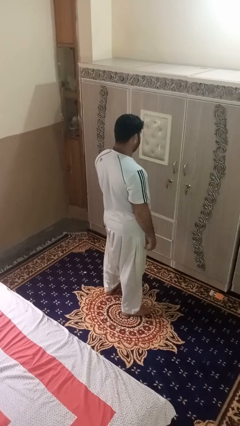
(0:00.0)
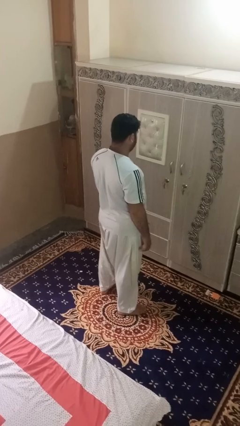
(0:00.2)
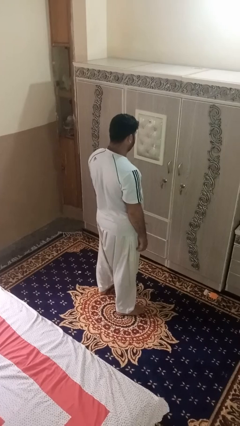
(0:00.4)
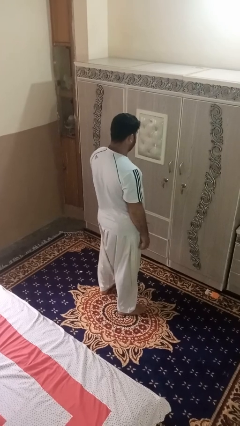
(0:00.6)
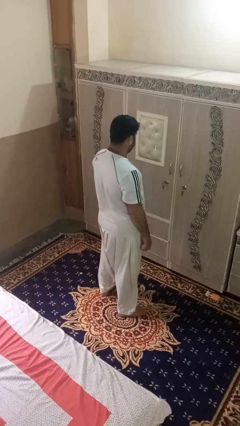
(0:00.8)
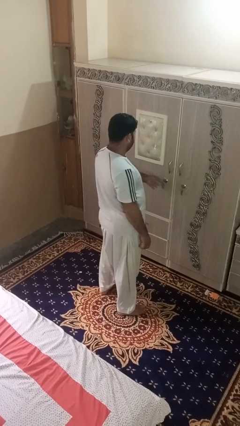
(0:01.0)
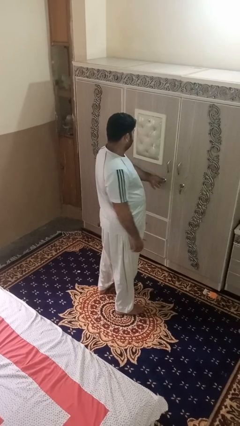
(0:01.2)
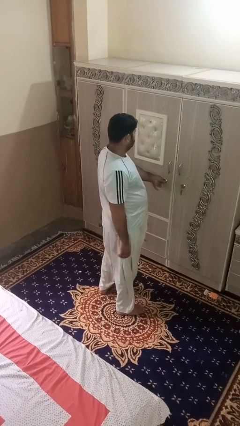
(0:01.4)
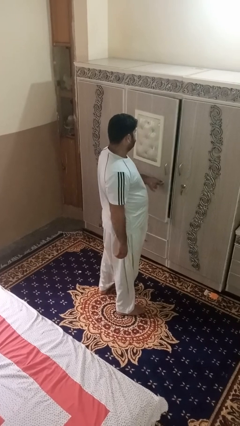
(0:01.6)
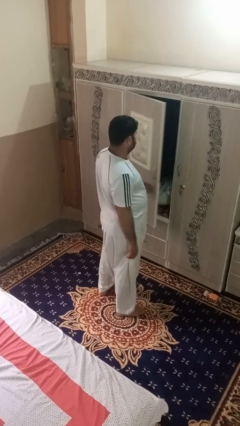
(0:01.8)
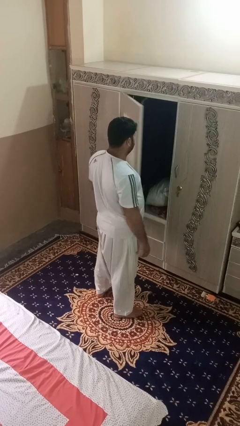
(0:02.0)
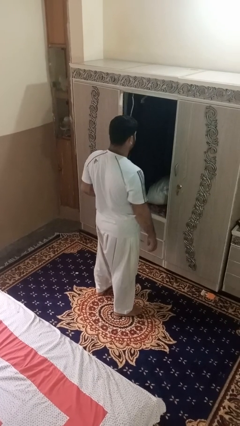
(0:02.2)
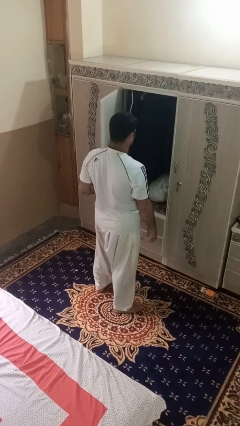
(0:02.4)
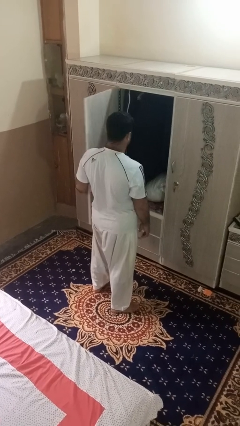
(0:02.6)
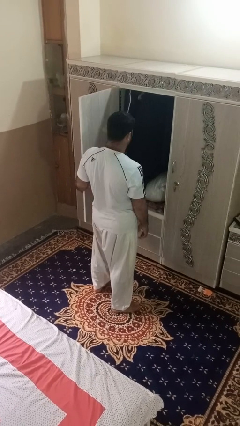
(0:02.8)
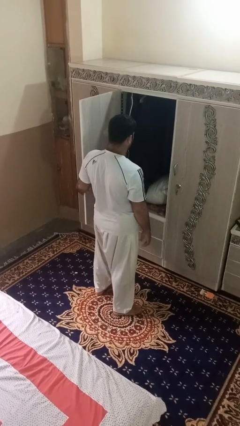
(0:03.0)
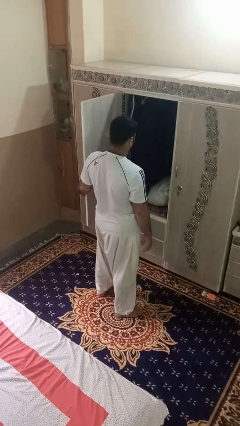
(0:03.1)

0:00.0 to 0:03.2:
person opens dresser drawer

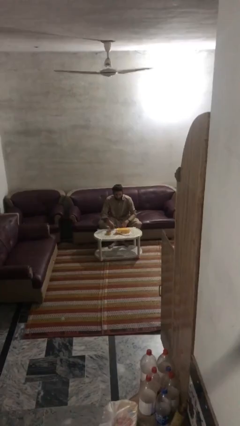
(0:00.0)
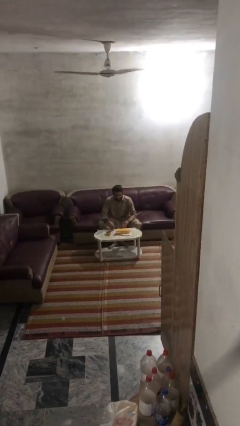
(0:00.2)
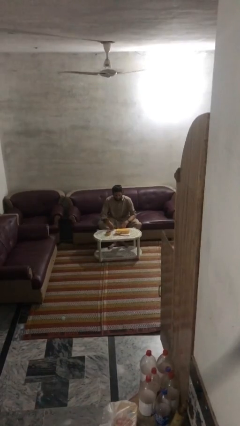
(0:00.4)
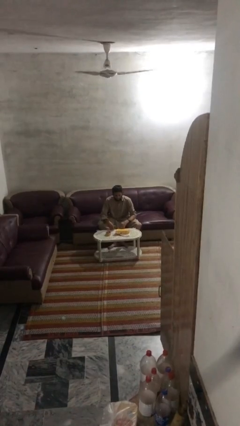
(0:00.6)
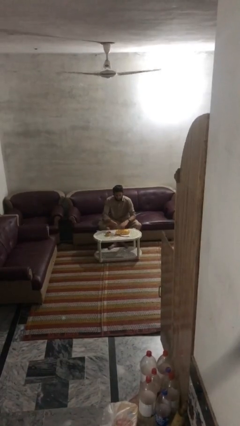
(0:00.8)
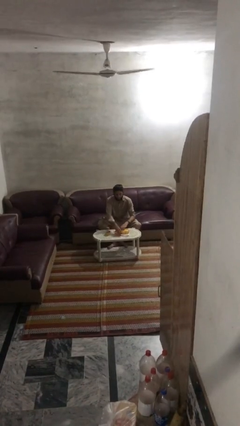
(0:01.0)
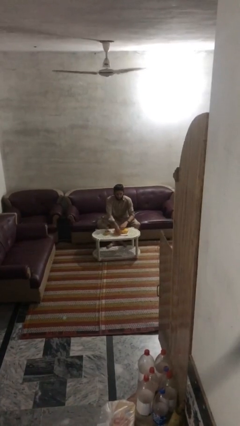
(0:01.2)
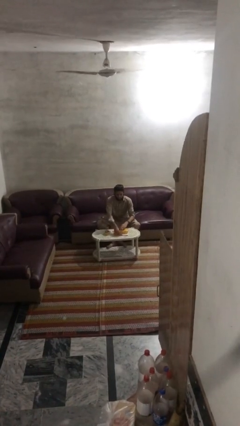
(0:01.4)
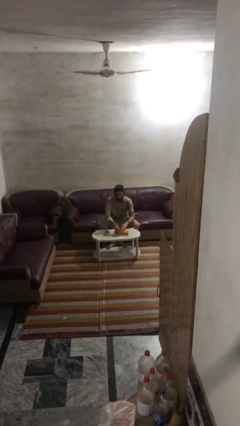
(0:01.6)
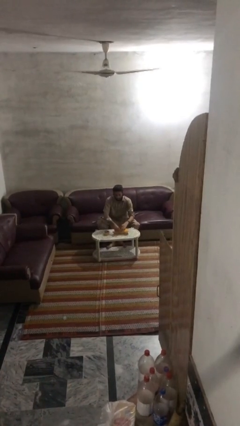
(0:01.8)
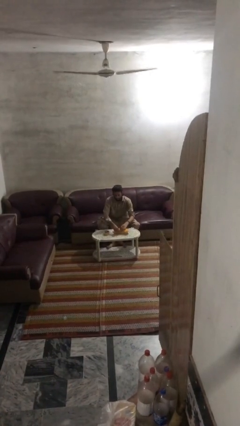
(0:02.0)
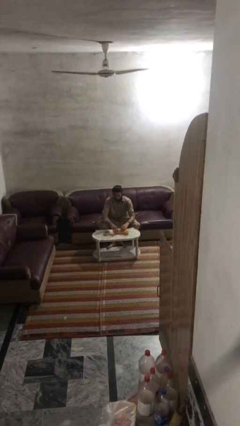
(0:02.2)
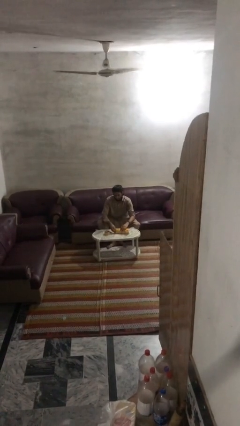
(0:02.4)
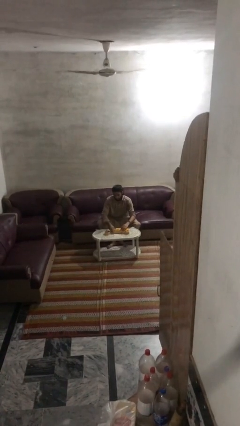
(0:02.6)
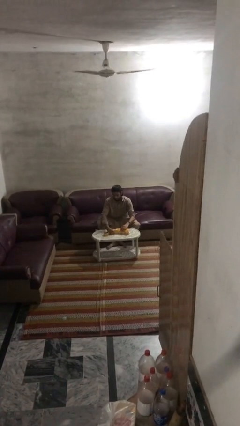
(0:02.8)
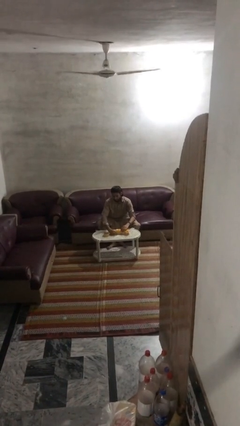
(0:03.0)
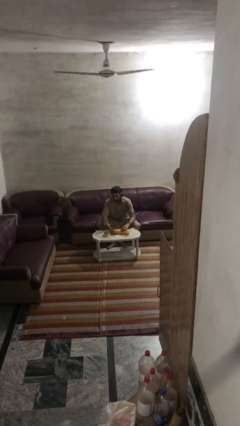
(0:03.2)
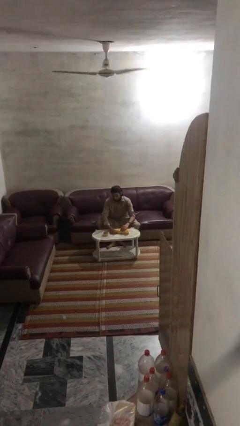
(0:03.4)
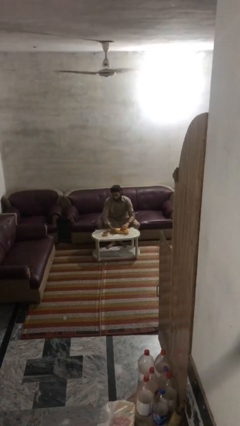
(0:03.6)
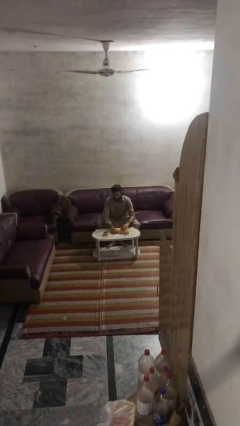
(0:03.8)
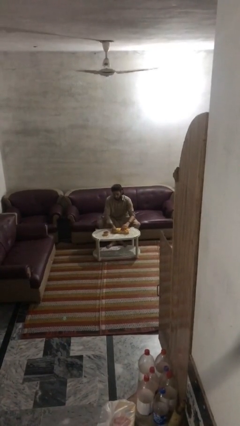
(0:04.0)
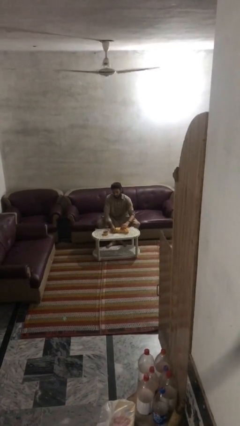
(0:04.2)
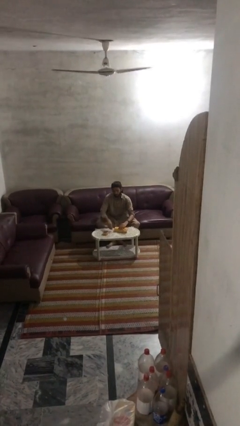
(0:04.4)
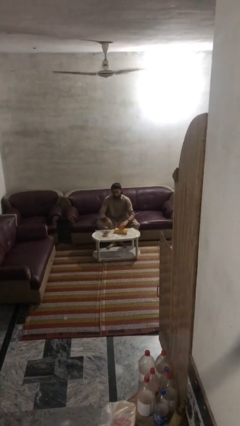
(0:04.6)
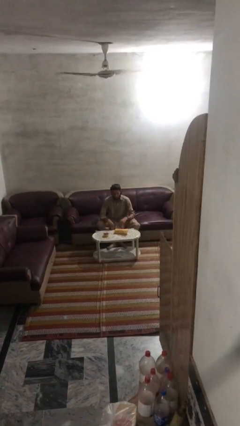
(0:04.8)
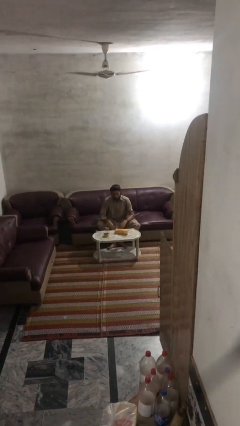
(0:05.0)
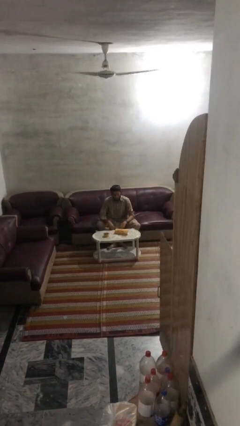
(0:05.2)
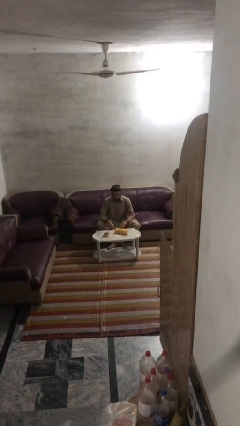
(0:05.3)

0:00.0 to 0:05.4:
person wraps box

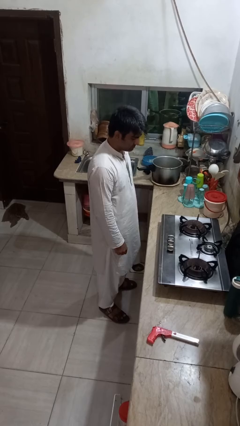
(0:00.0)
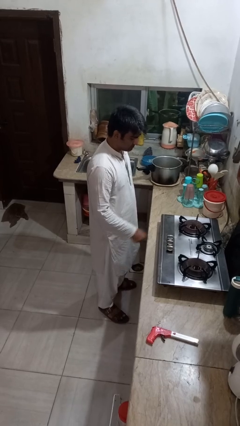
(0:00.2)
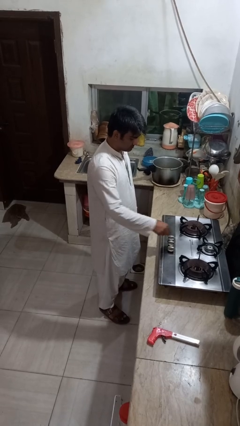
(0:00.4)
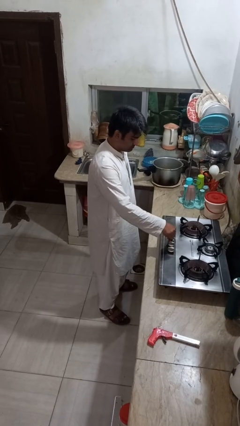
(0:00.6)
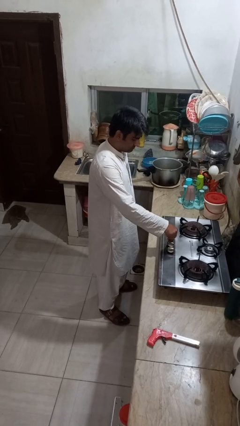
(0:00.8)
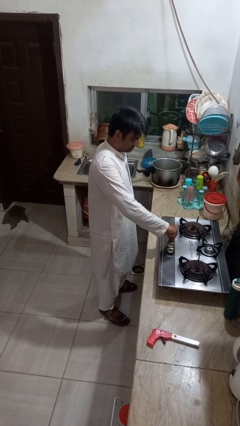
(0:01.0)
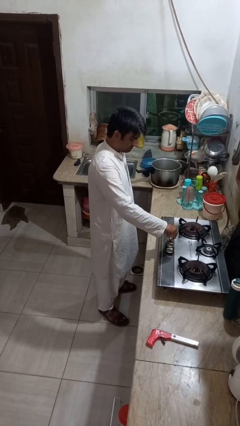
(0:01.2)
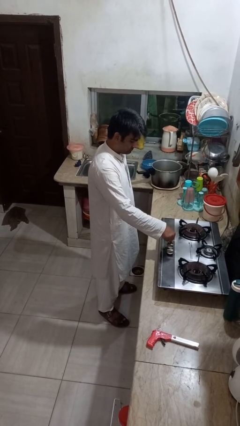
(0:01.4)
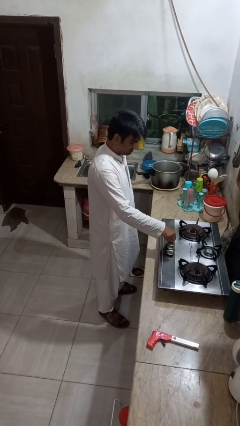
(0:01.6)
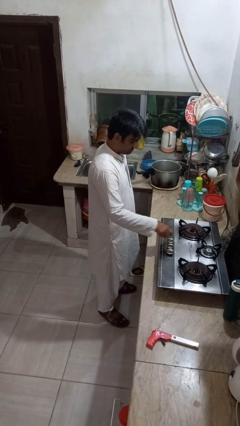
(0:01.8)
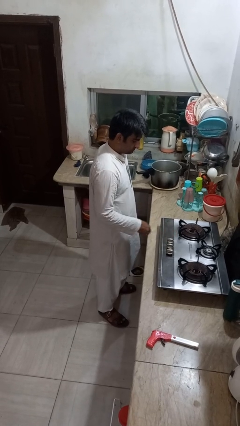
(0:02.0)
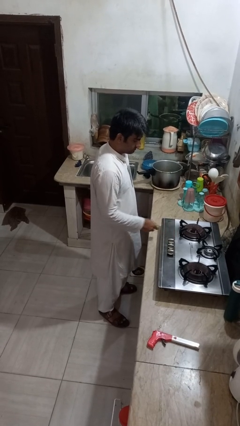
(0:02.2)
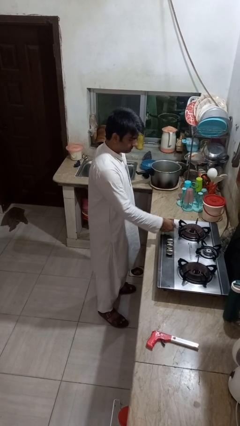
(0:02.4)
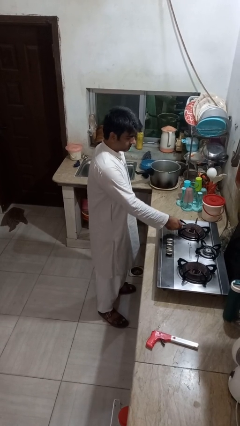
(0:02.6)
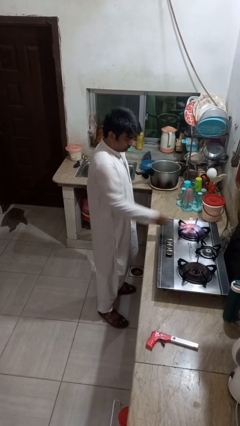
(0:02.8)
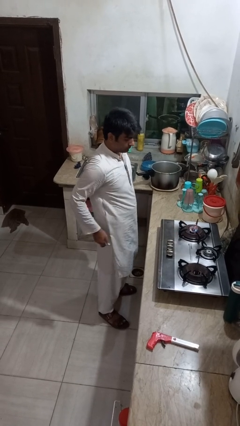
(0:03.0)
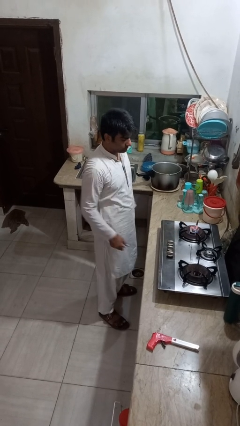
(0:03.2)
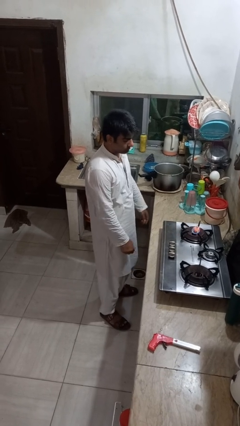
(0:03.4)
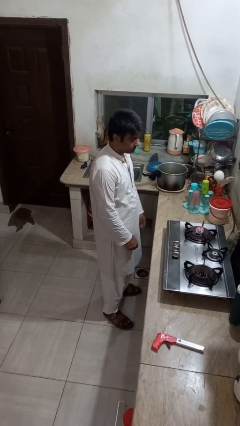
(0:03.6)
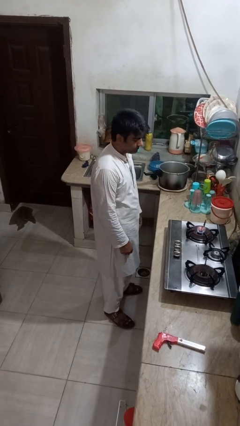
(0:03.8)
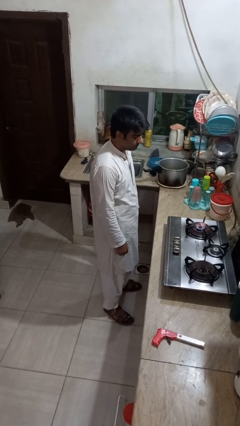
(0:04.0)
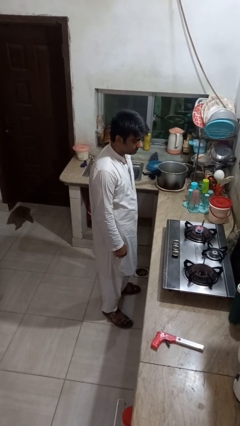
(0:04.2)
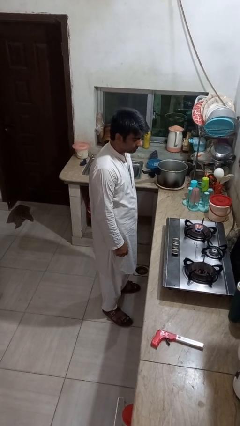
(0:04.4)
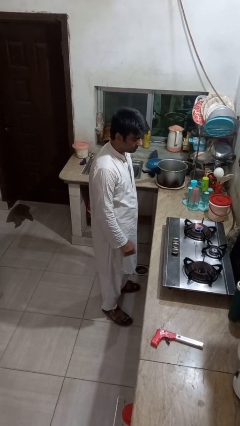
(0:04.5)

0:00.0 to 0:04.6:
person turns on stovetop

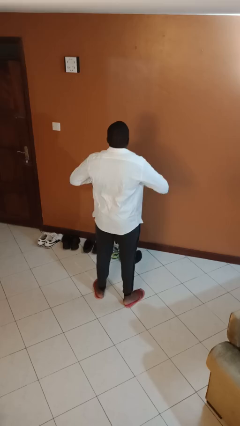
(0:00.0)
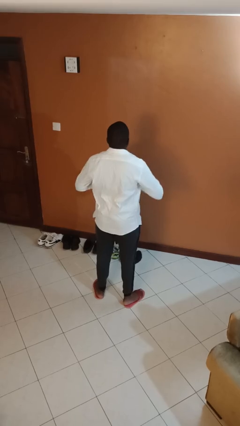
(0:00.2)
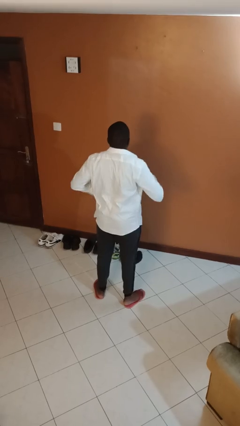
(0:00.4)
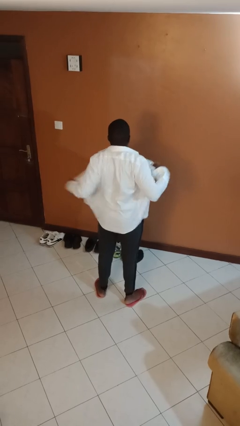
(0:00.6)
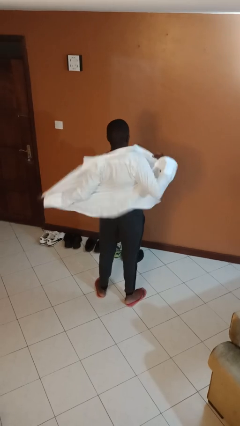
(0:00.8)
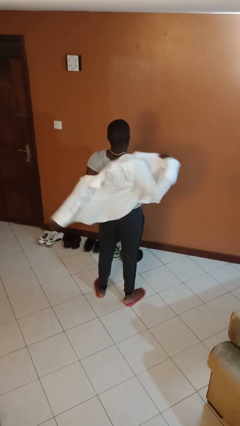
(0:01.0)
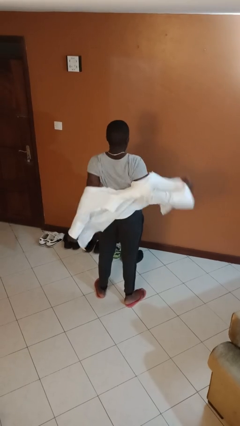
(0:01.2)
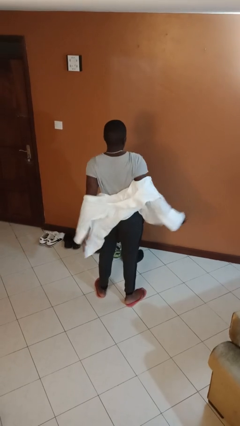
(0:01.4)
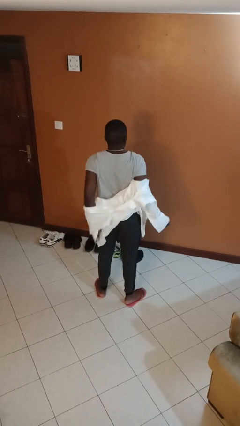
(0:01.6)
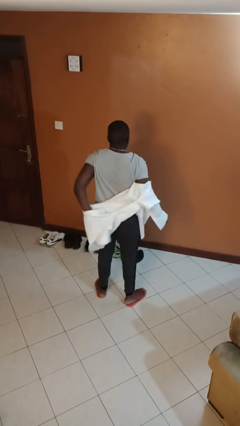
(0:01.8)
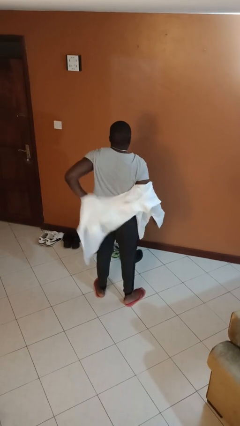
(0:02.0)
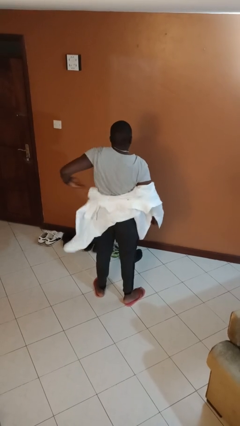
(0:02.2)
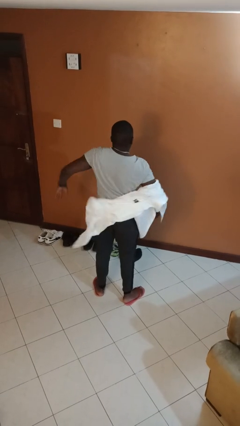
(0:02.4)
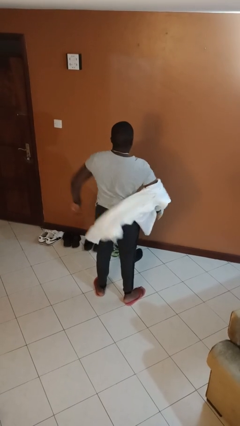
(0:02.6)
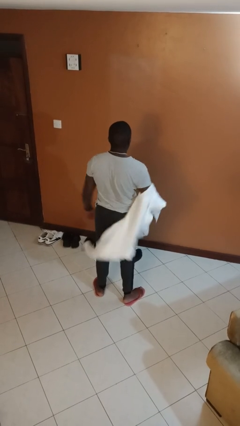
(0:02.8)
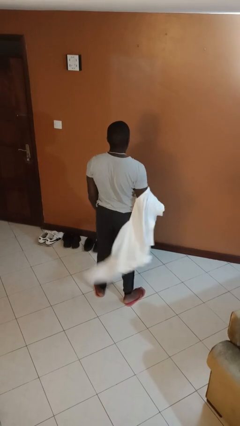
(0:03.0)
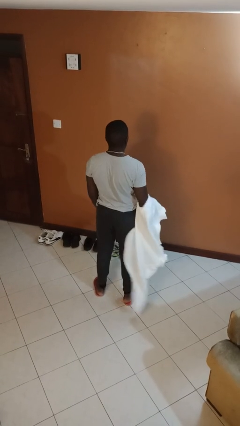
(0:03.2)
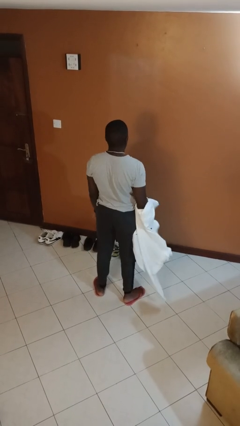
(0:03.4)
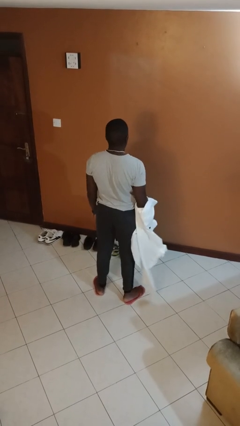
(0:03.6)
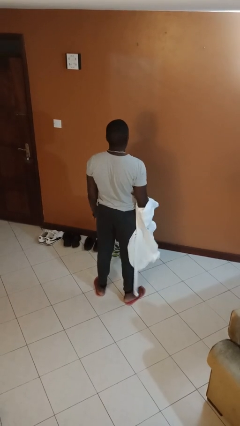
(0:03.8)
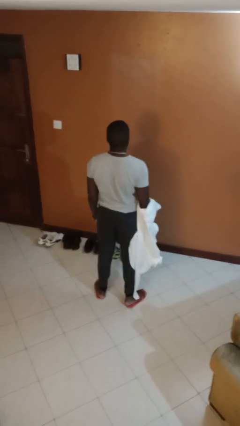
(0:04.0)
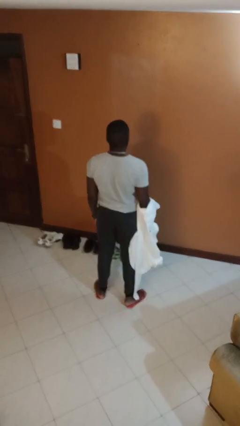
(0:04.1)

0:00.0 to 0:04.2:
person takes off shirt

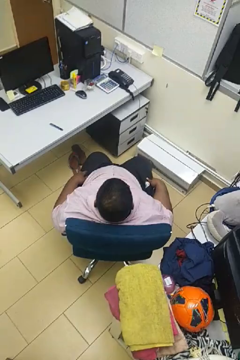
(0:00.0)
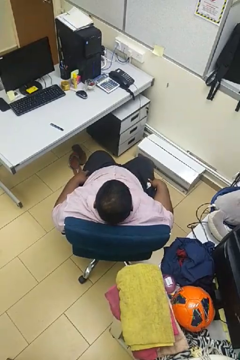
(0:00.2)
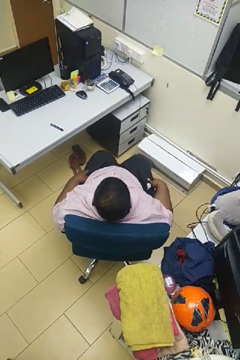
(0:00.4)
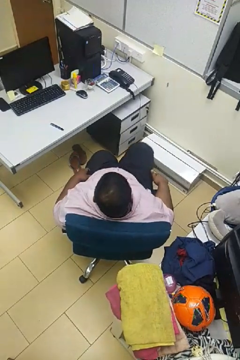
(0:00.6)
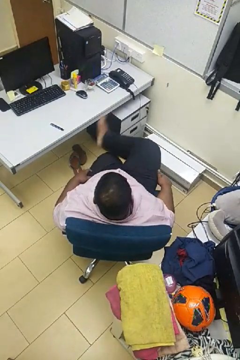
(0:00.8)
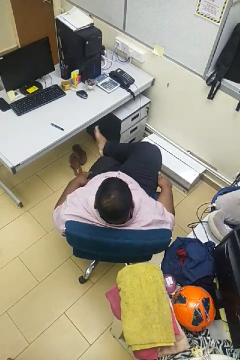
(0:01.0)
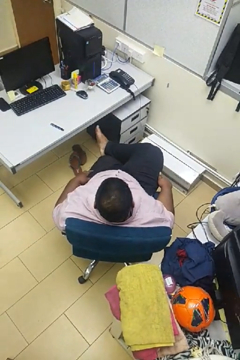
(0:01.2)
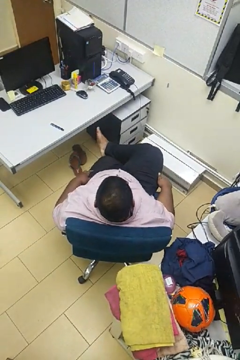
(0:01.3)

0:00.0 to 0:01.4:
person crosses legs
